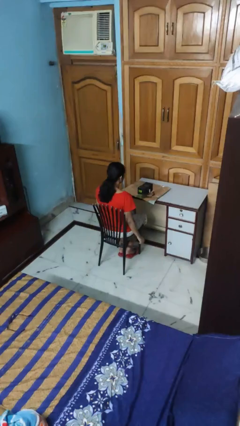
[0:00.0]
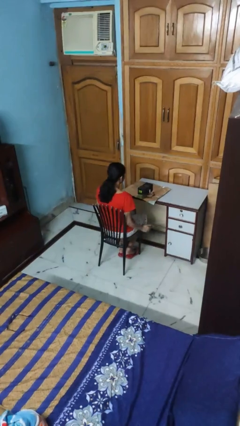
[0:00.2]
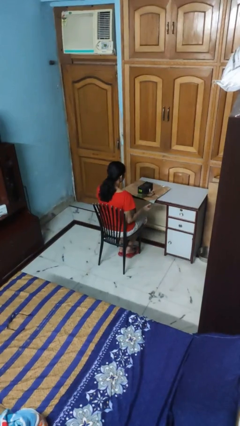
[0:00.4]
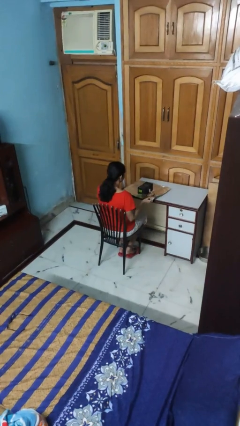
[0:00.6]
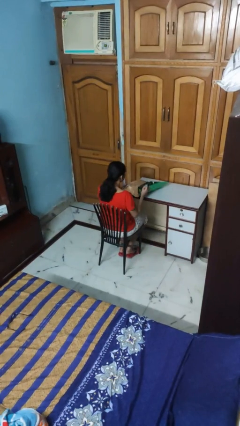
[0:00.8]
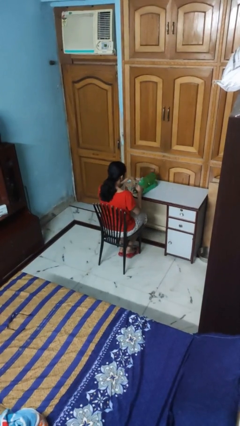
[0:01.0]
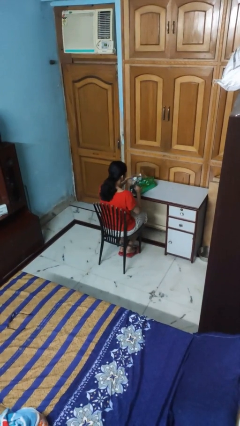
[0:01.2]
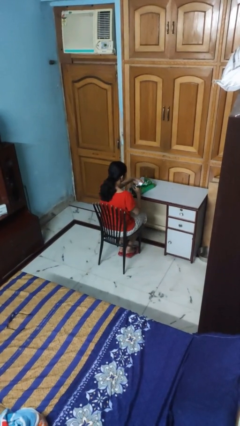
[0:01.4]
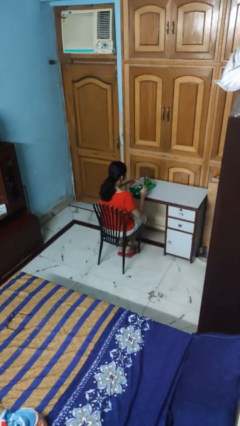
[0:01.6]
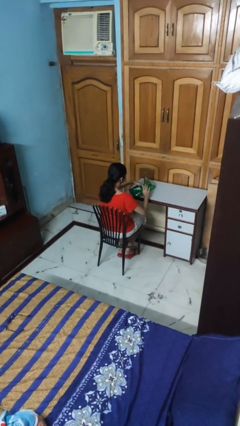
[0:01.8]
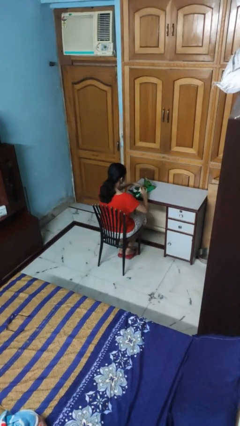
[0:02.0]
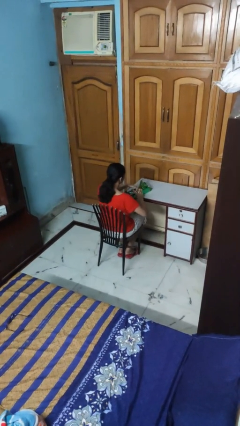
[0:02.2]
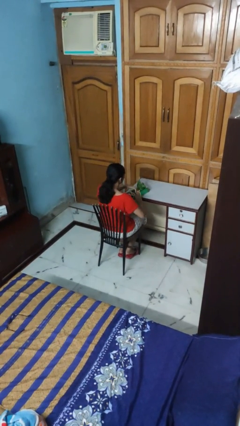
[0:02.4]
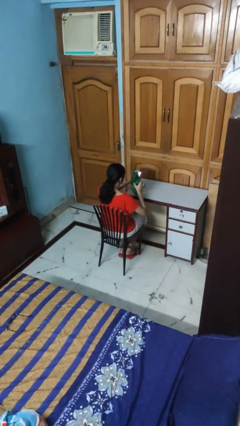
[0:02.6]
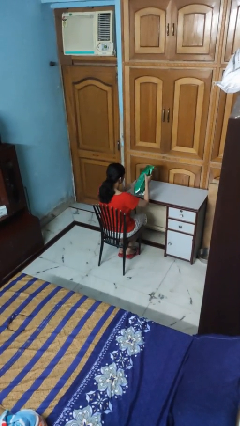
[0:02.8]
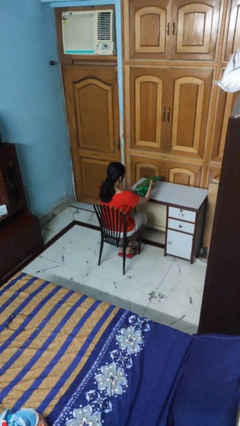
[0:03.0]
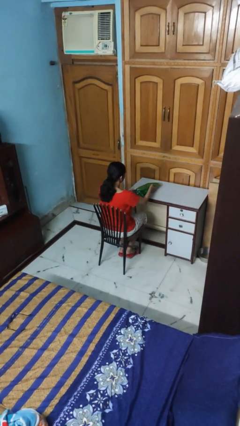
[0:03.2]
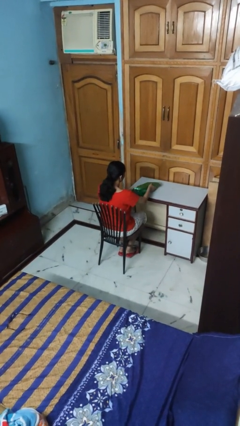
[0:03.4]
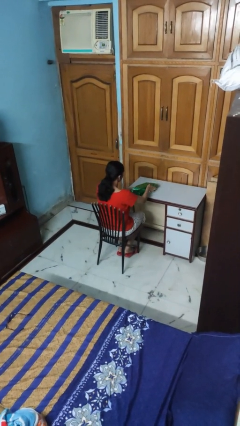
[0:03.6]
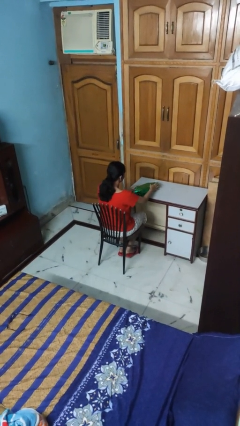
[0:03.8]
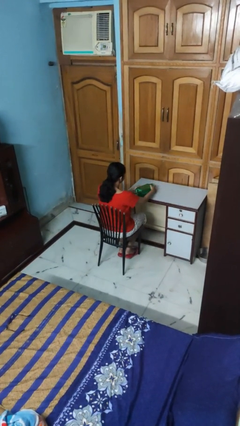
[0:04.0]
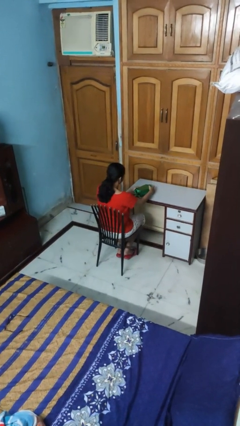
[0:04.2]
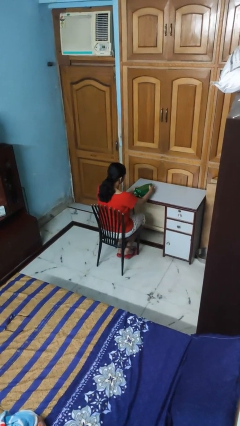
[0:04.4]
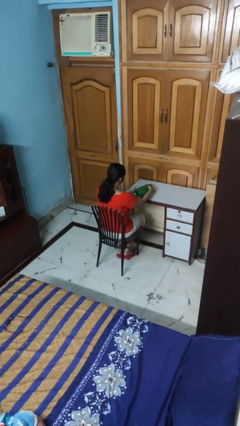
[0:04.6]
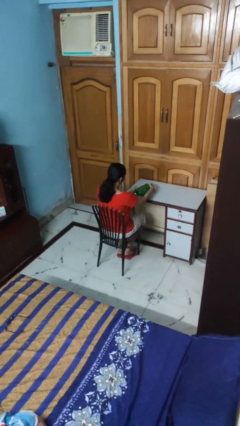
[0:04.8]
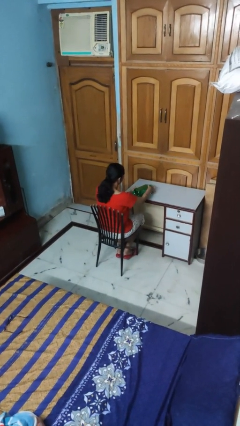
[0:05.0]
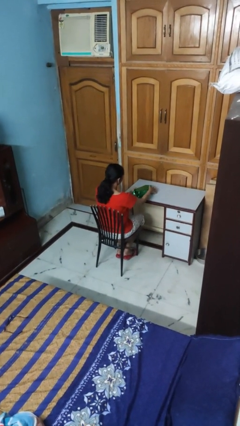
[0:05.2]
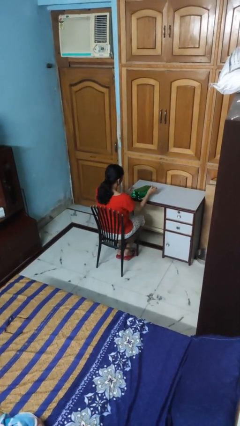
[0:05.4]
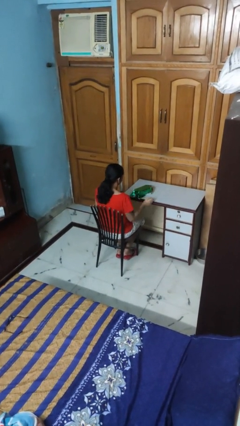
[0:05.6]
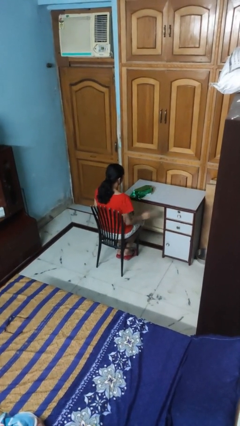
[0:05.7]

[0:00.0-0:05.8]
person wraps box

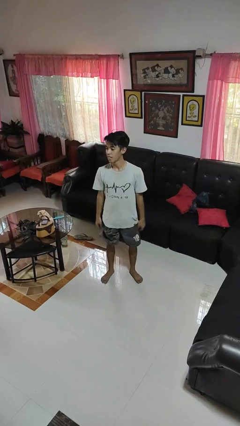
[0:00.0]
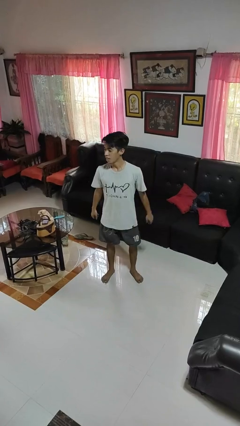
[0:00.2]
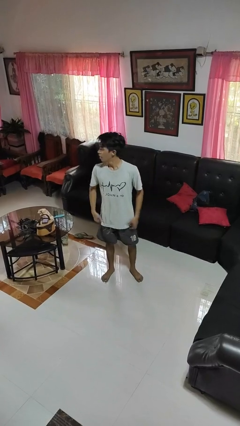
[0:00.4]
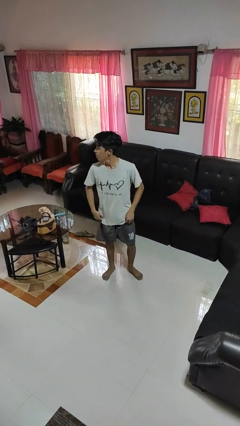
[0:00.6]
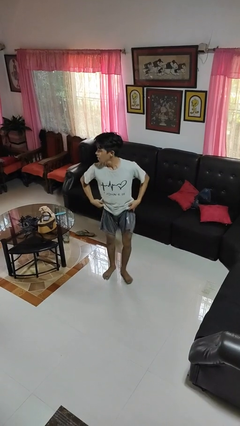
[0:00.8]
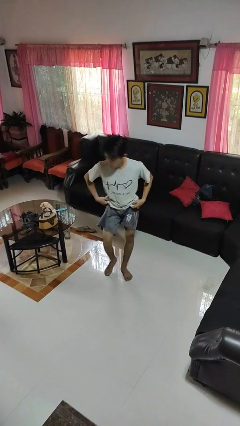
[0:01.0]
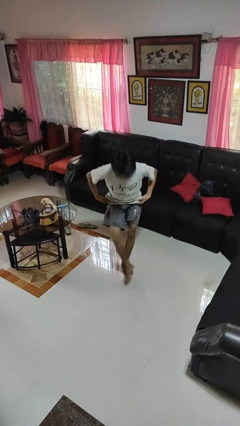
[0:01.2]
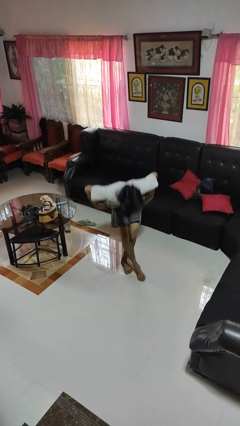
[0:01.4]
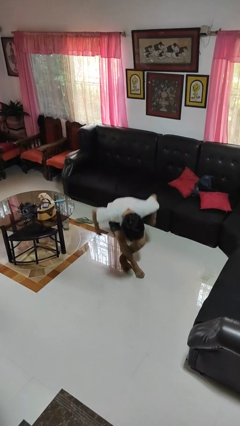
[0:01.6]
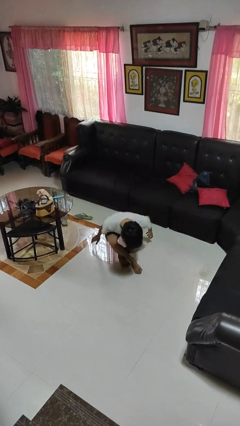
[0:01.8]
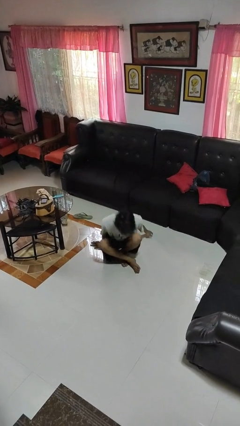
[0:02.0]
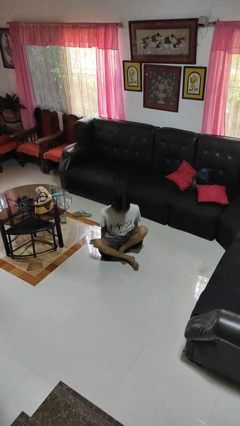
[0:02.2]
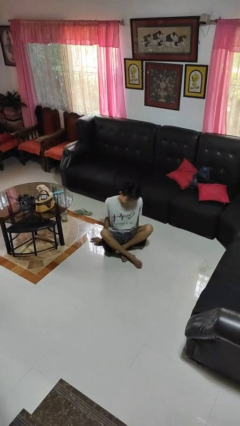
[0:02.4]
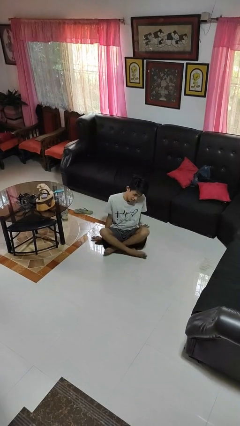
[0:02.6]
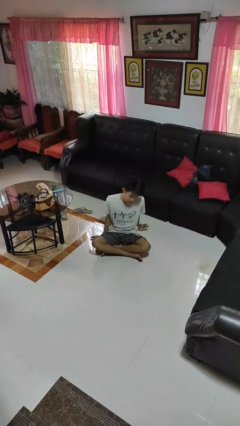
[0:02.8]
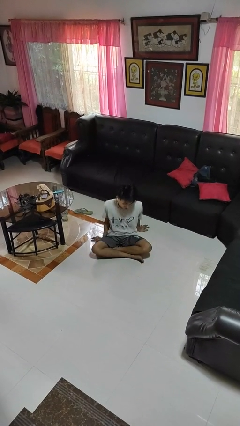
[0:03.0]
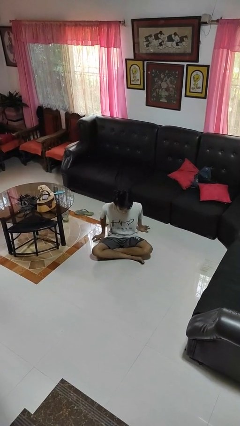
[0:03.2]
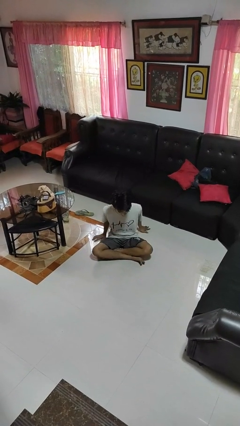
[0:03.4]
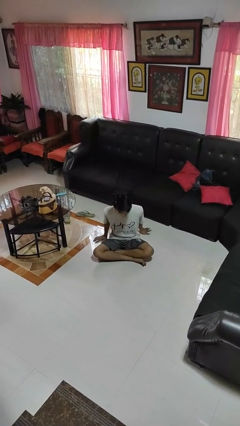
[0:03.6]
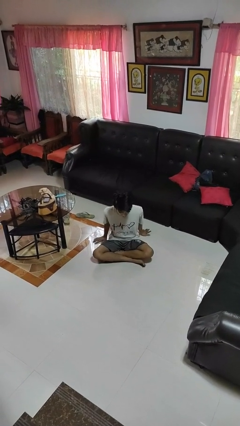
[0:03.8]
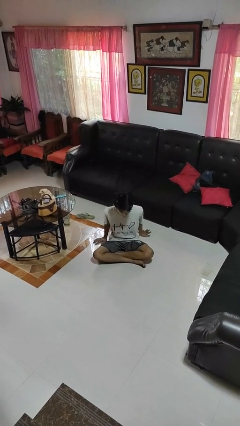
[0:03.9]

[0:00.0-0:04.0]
person sits crisscross

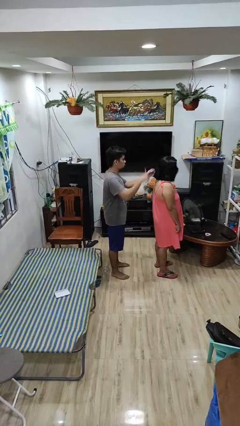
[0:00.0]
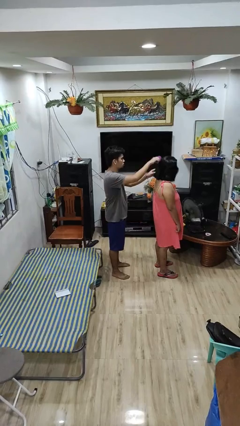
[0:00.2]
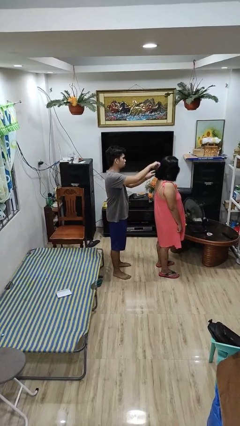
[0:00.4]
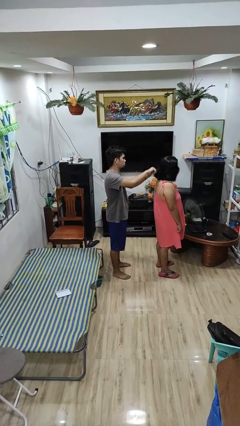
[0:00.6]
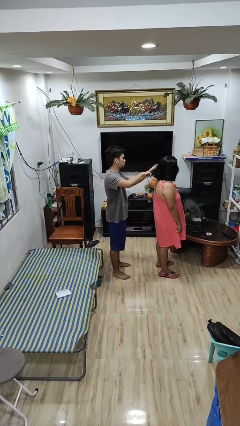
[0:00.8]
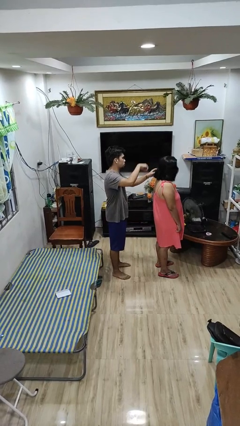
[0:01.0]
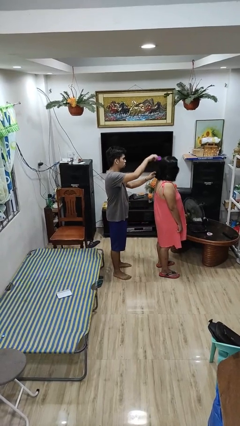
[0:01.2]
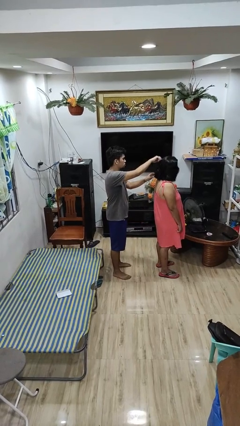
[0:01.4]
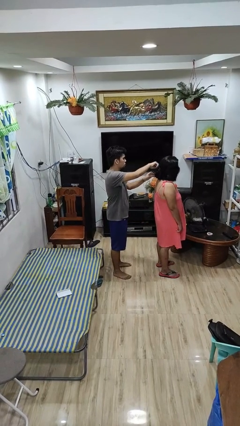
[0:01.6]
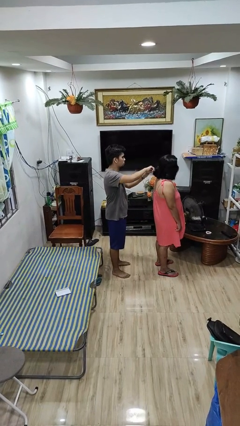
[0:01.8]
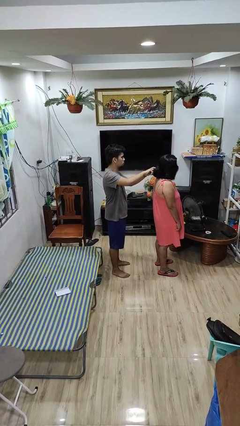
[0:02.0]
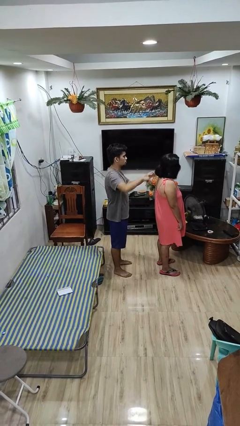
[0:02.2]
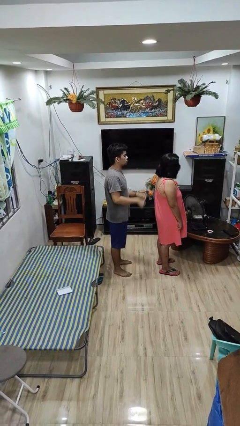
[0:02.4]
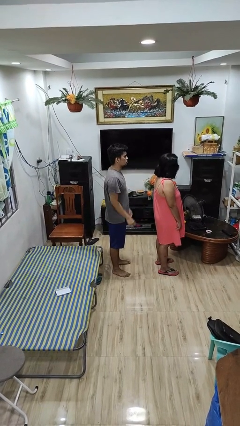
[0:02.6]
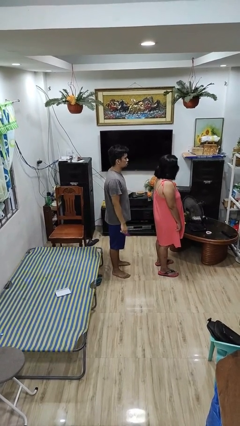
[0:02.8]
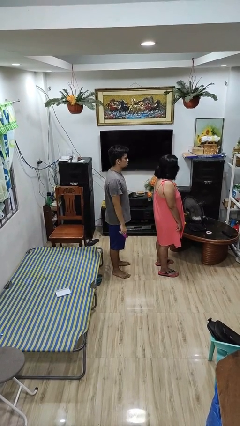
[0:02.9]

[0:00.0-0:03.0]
person brushes hair of person

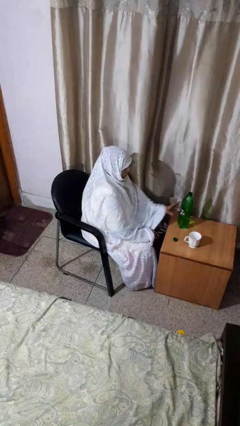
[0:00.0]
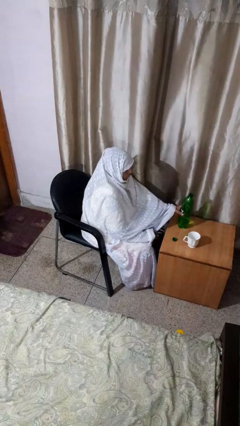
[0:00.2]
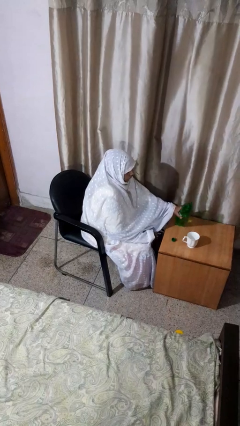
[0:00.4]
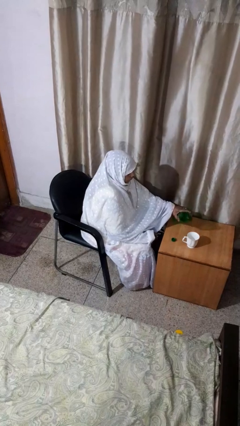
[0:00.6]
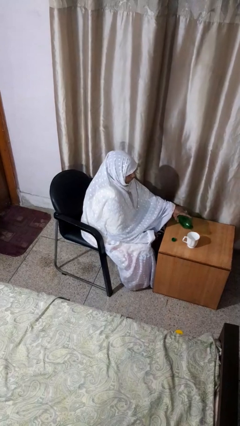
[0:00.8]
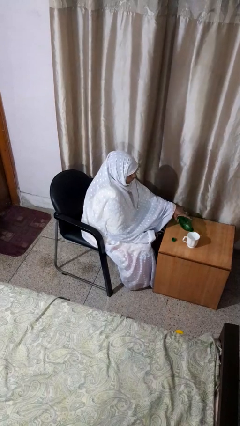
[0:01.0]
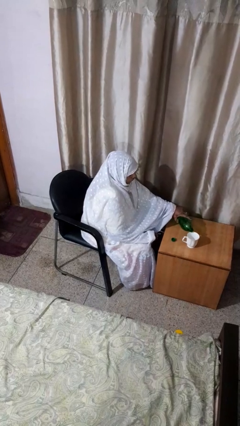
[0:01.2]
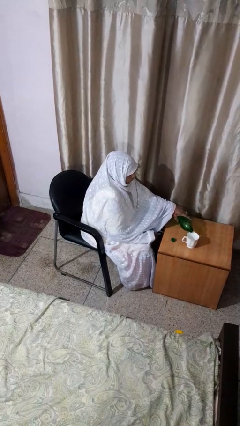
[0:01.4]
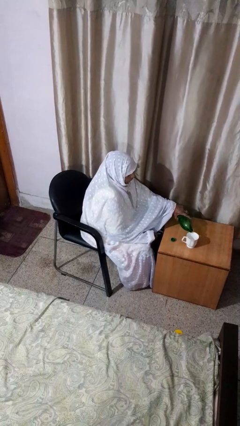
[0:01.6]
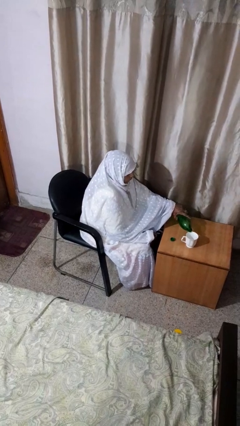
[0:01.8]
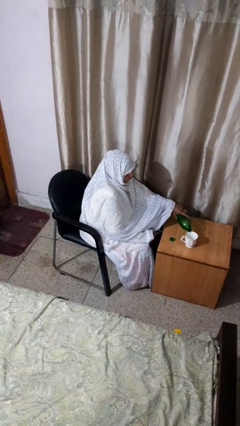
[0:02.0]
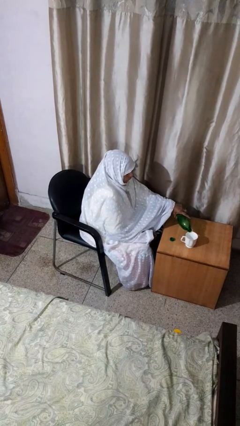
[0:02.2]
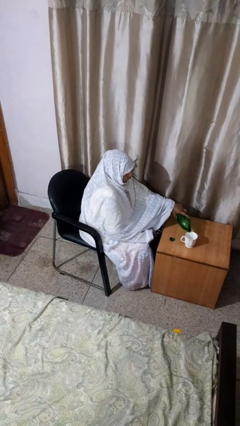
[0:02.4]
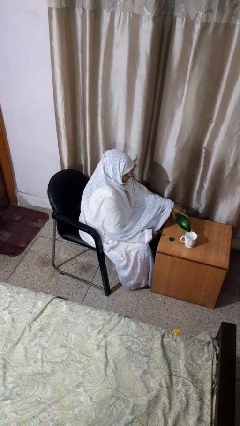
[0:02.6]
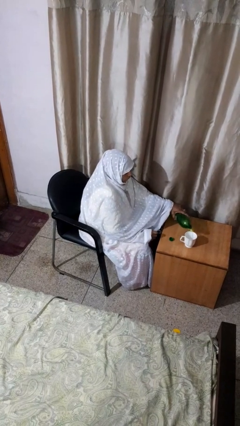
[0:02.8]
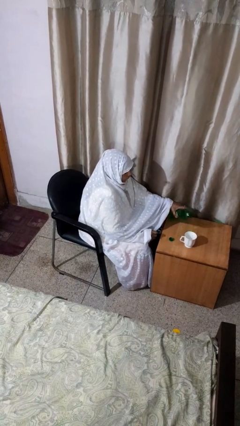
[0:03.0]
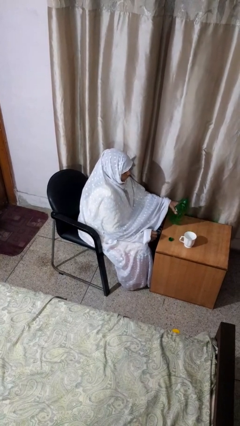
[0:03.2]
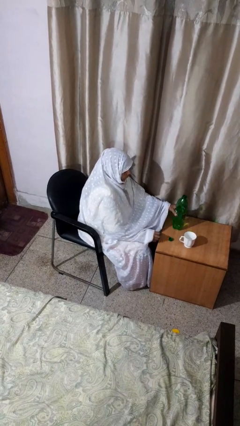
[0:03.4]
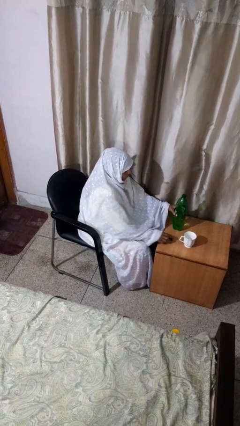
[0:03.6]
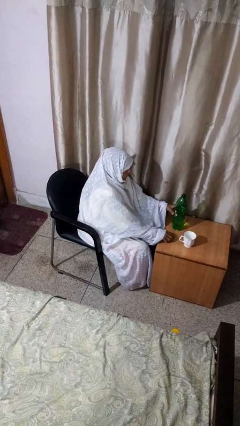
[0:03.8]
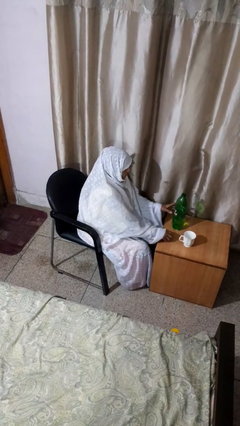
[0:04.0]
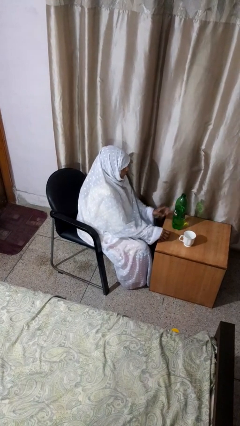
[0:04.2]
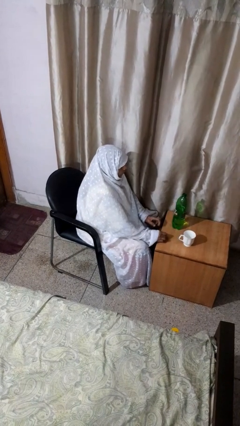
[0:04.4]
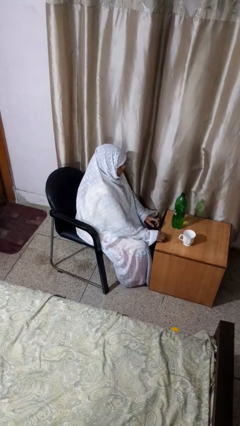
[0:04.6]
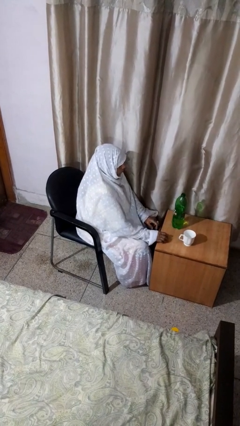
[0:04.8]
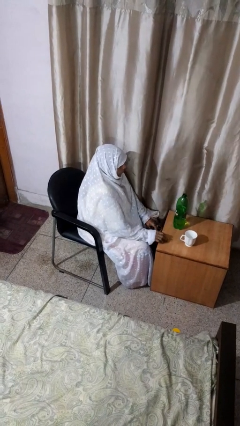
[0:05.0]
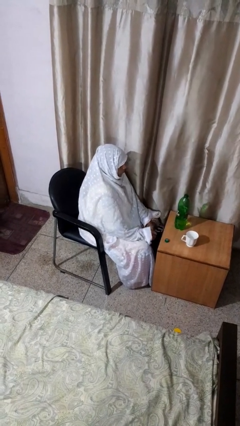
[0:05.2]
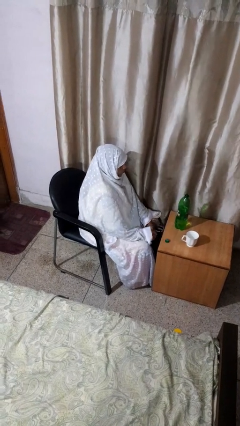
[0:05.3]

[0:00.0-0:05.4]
person pours liquid into cup
